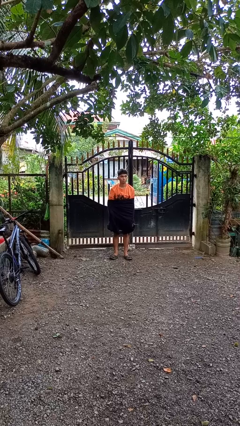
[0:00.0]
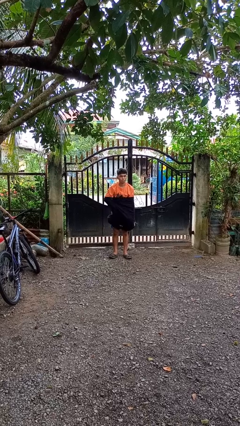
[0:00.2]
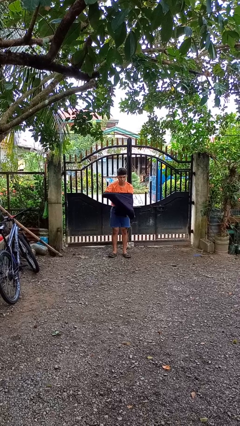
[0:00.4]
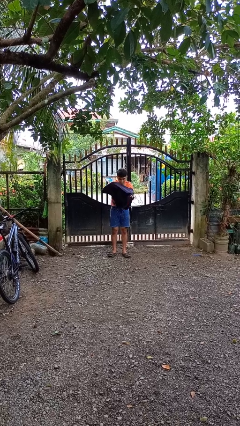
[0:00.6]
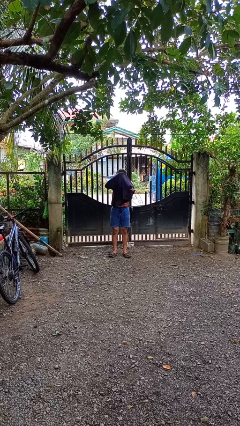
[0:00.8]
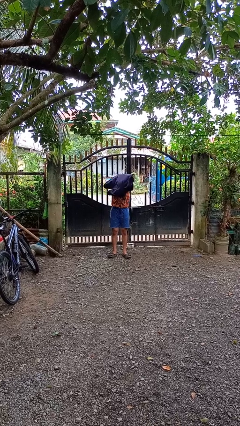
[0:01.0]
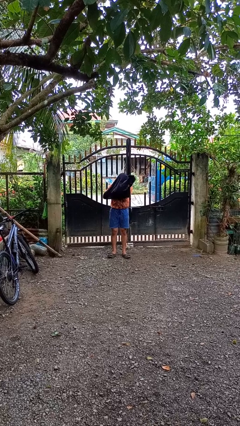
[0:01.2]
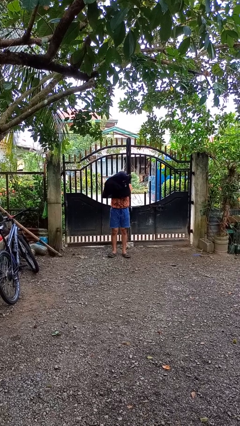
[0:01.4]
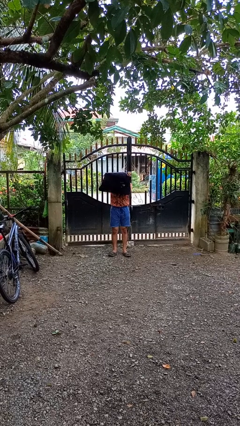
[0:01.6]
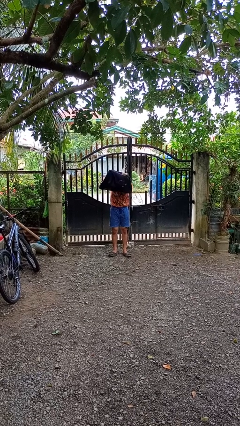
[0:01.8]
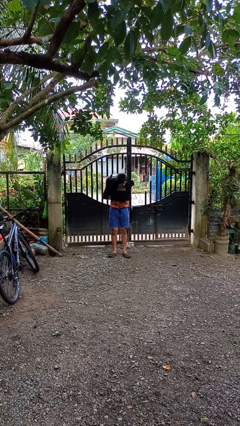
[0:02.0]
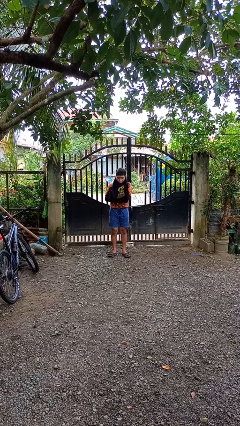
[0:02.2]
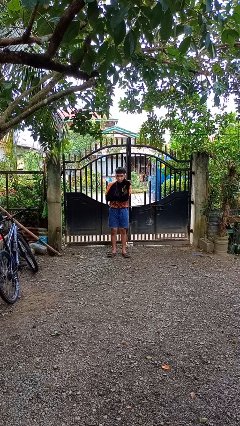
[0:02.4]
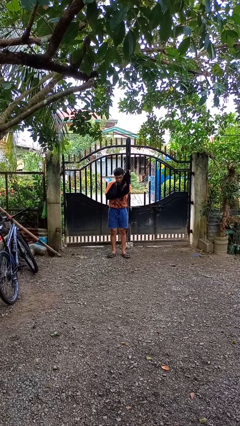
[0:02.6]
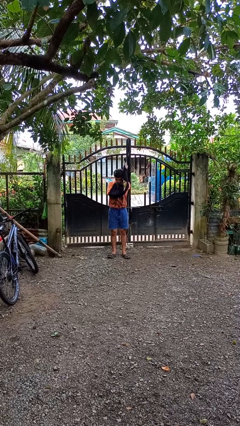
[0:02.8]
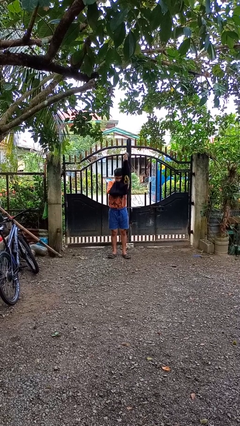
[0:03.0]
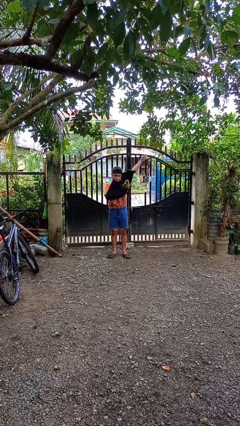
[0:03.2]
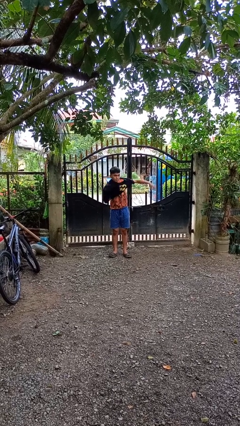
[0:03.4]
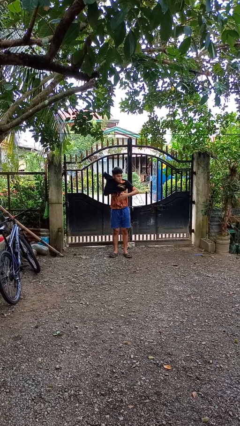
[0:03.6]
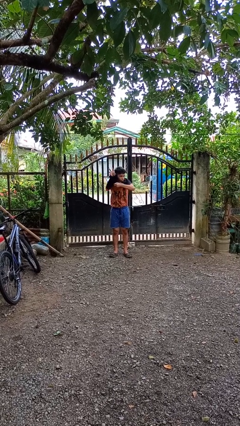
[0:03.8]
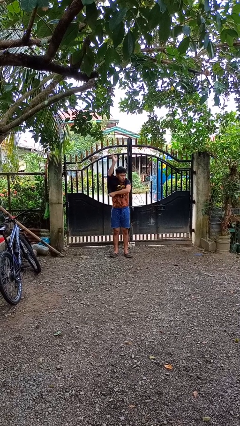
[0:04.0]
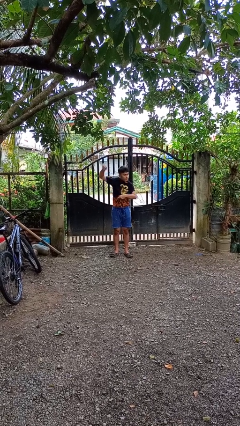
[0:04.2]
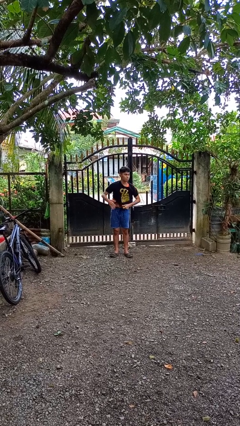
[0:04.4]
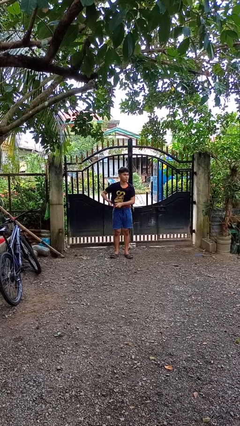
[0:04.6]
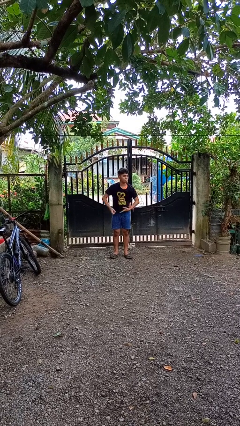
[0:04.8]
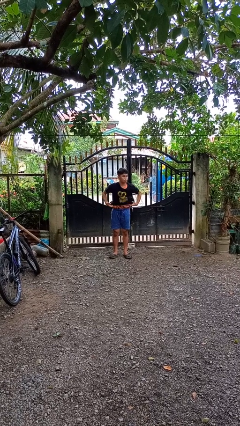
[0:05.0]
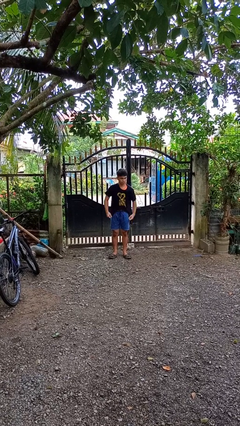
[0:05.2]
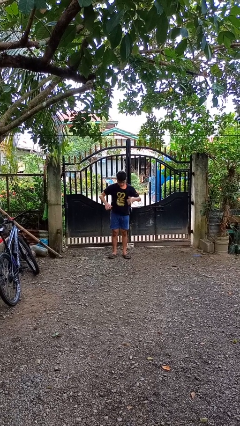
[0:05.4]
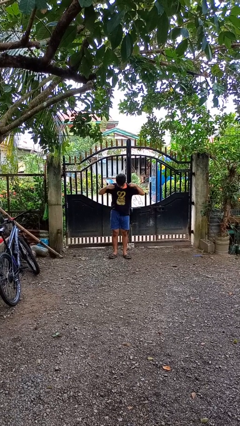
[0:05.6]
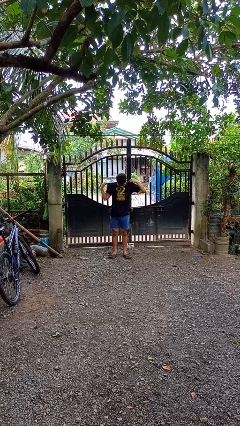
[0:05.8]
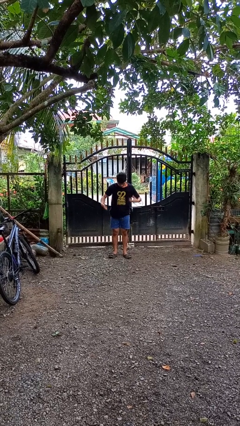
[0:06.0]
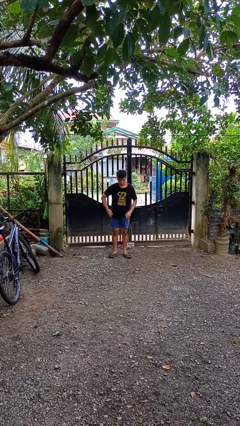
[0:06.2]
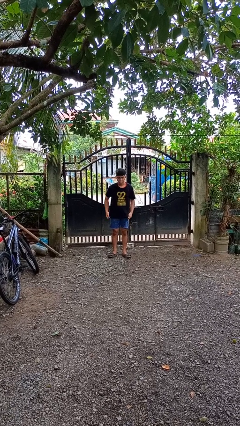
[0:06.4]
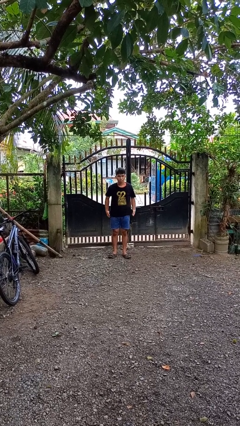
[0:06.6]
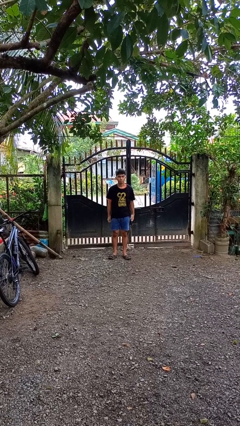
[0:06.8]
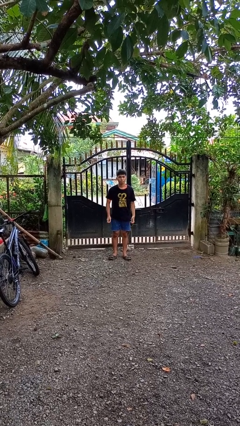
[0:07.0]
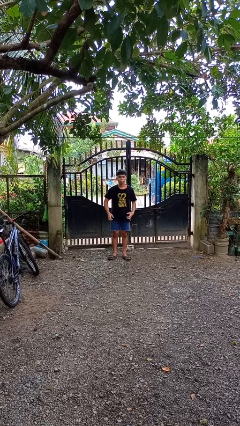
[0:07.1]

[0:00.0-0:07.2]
person puts on shirt

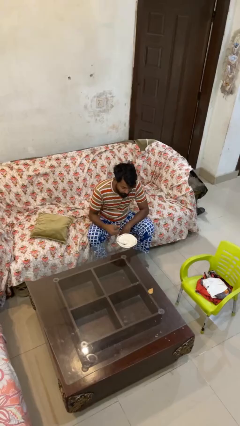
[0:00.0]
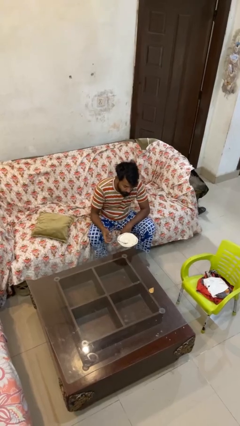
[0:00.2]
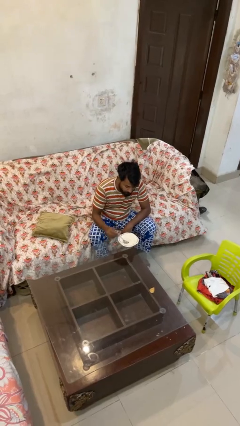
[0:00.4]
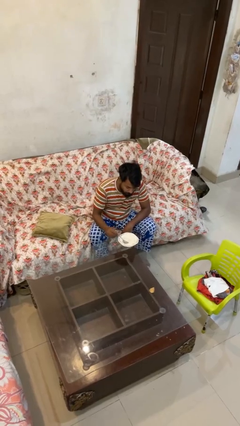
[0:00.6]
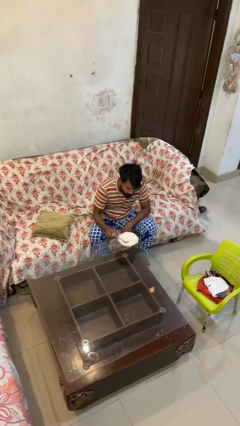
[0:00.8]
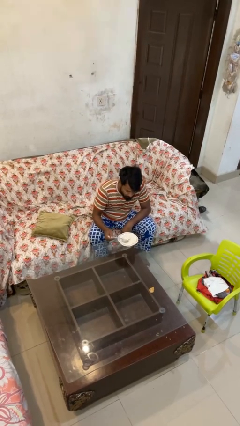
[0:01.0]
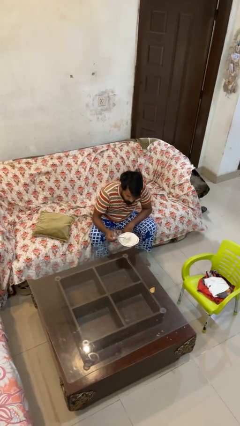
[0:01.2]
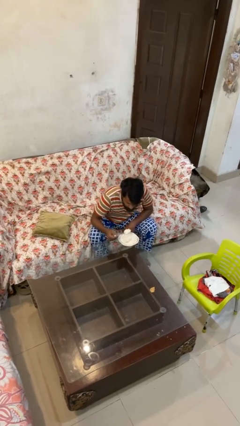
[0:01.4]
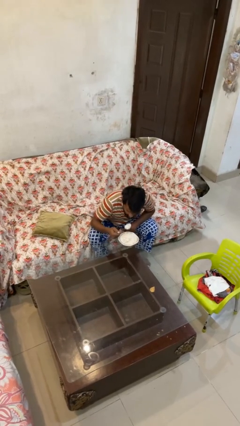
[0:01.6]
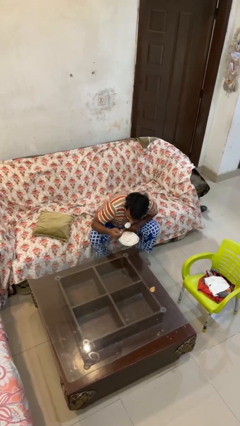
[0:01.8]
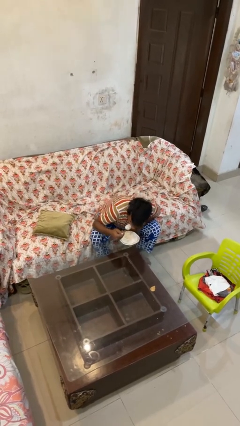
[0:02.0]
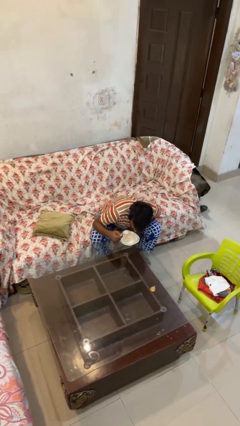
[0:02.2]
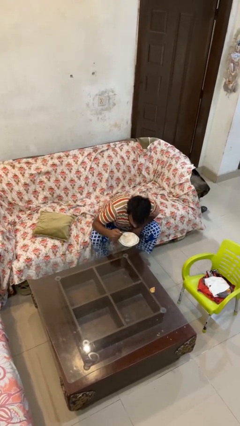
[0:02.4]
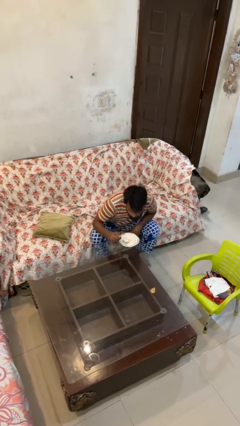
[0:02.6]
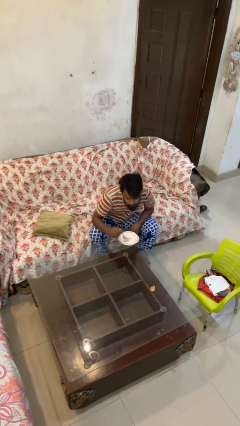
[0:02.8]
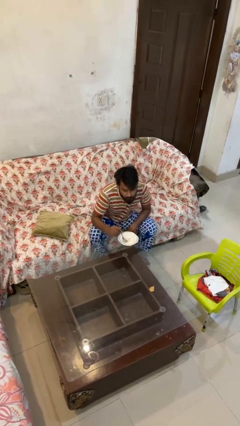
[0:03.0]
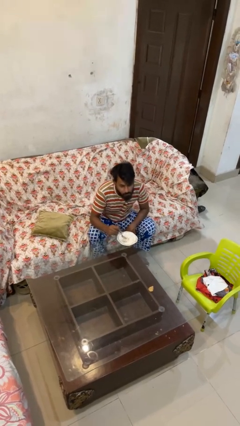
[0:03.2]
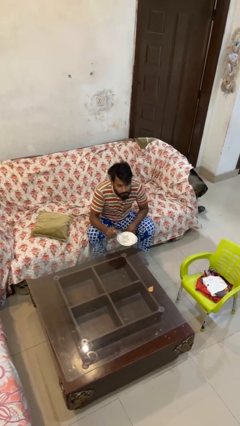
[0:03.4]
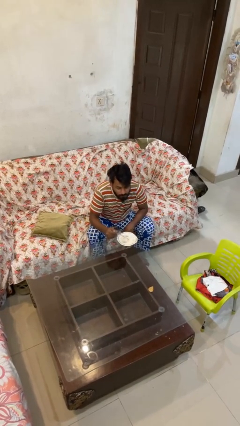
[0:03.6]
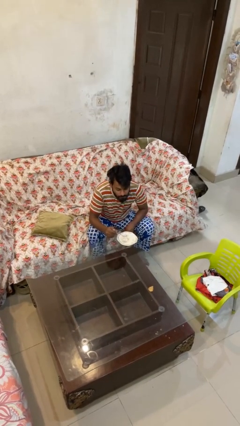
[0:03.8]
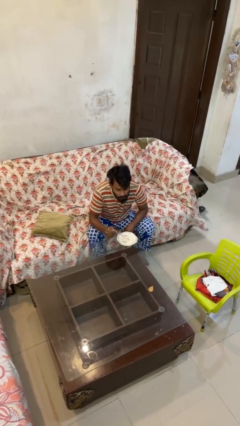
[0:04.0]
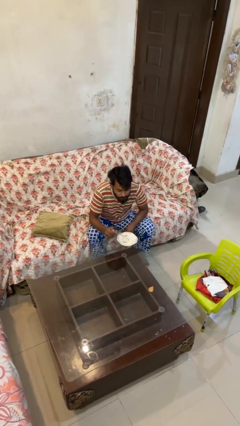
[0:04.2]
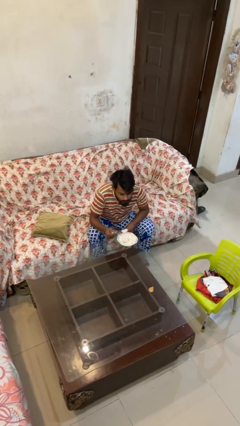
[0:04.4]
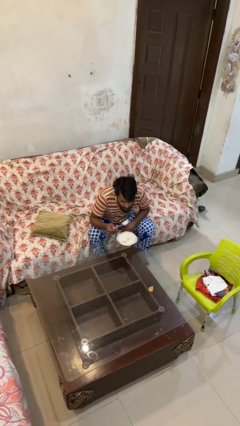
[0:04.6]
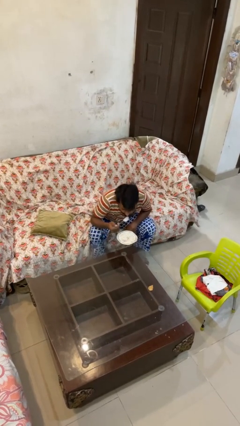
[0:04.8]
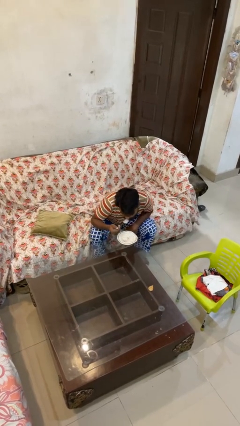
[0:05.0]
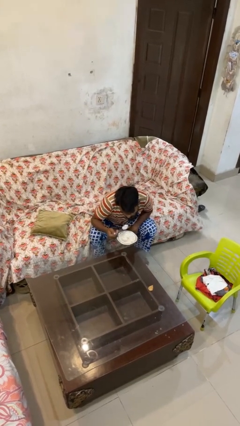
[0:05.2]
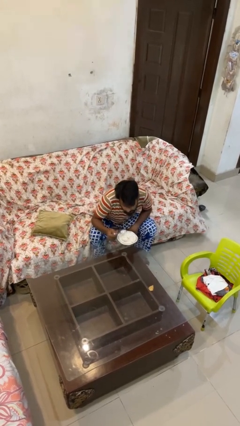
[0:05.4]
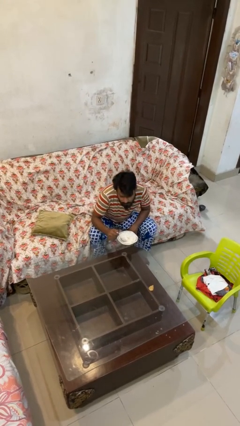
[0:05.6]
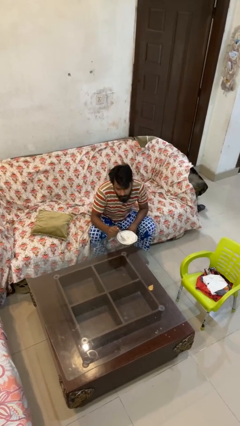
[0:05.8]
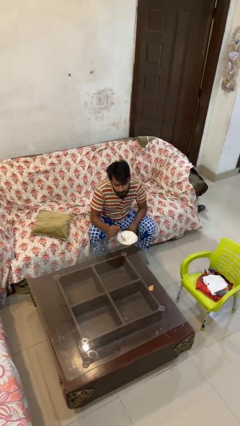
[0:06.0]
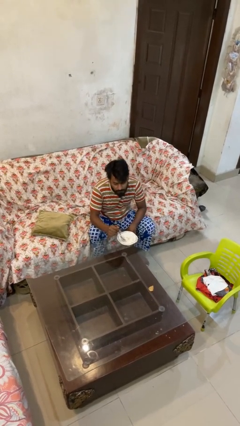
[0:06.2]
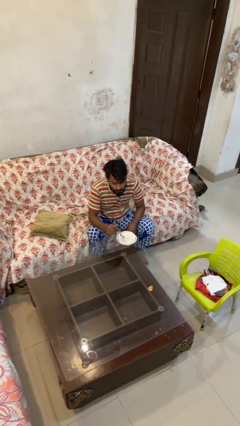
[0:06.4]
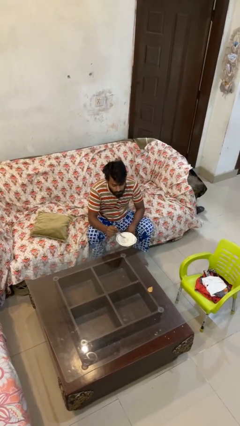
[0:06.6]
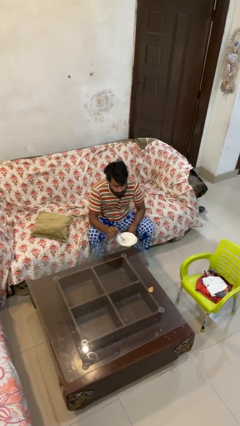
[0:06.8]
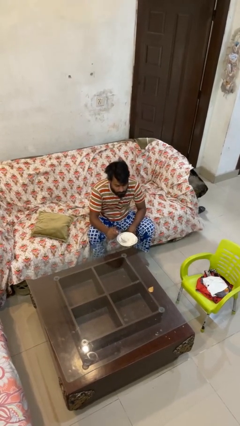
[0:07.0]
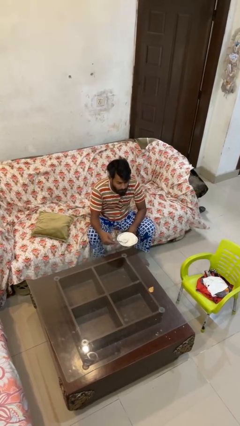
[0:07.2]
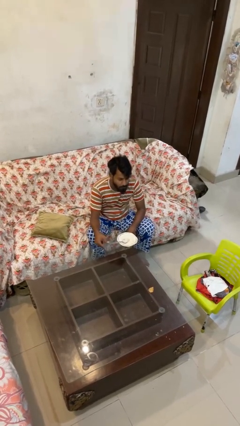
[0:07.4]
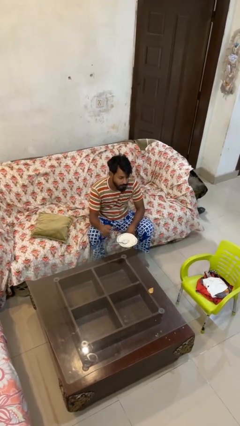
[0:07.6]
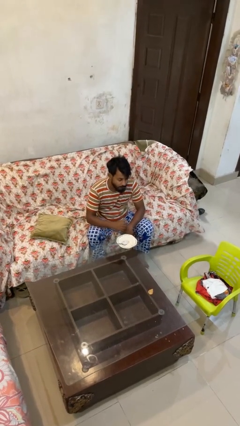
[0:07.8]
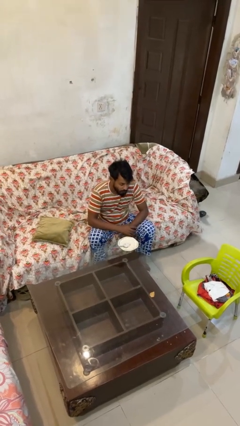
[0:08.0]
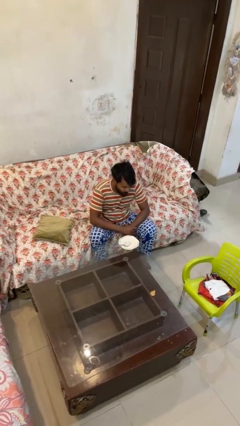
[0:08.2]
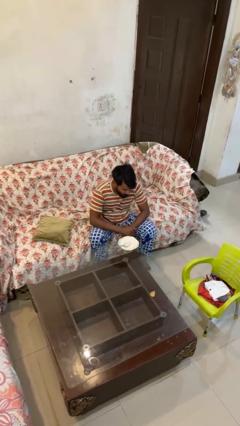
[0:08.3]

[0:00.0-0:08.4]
person eats with utensil

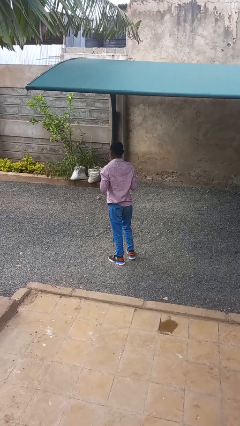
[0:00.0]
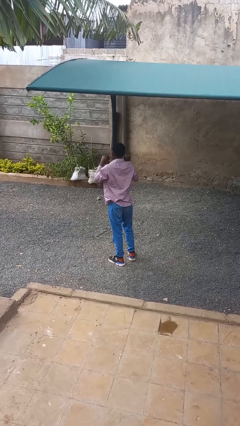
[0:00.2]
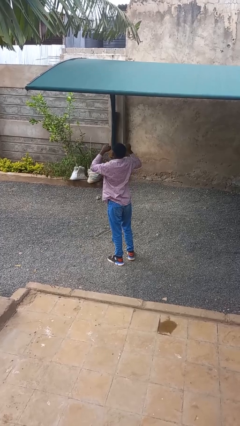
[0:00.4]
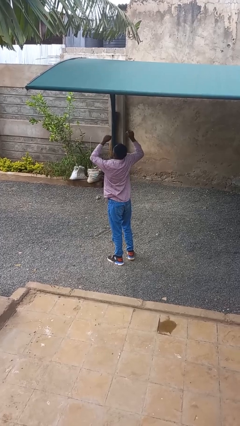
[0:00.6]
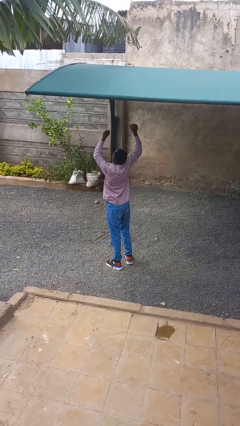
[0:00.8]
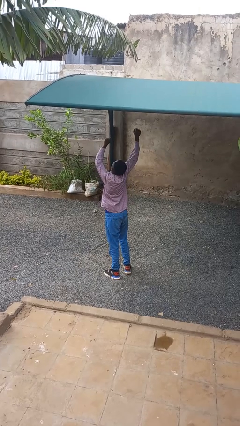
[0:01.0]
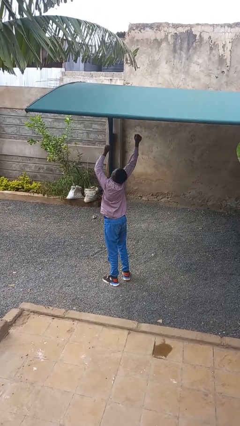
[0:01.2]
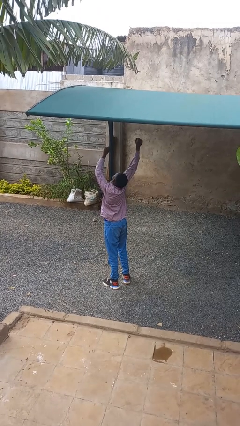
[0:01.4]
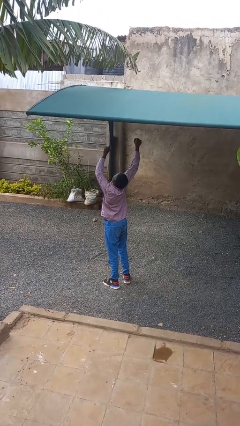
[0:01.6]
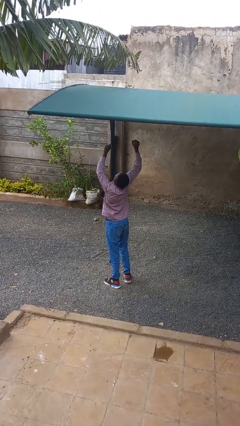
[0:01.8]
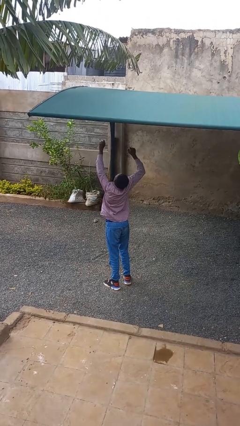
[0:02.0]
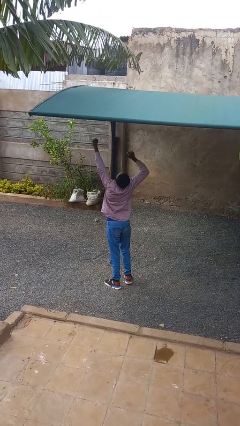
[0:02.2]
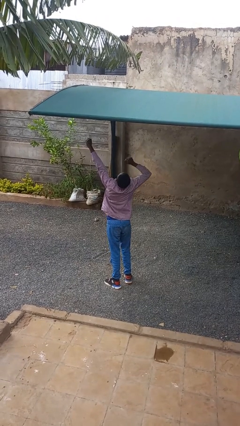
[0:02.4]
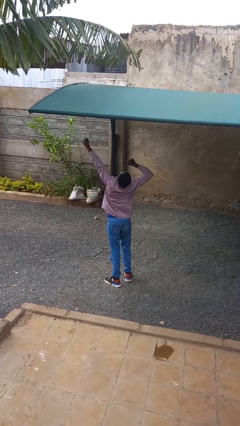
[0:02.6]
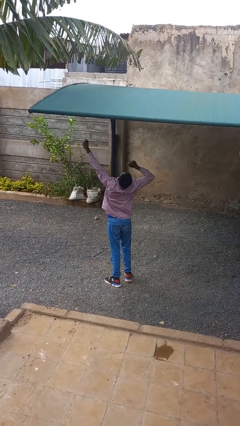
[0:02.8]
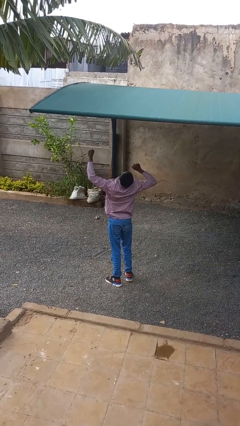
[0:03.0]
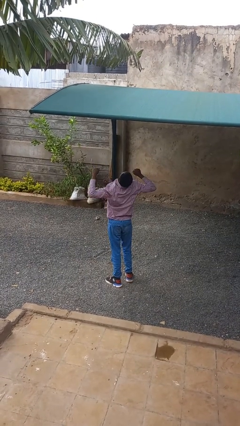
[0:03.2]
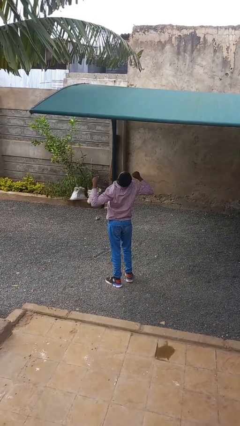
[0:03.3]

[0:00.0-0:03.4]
person stretches arms over head
